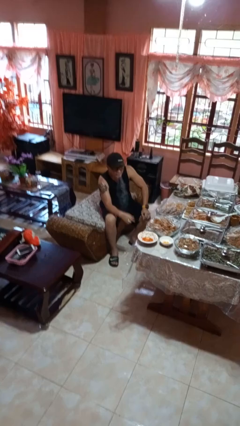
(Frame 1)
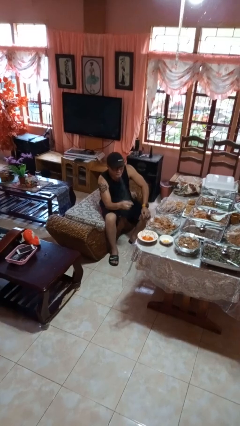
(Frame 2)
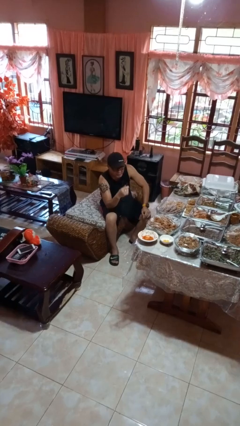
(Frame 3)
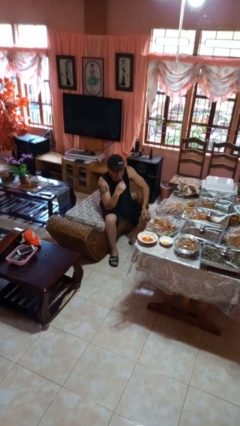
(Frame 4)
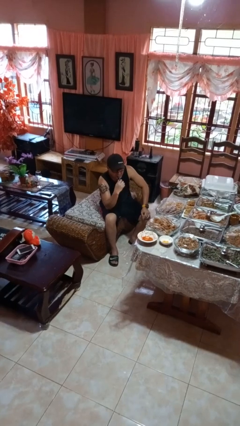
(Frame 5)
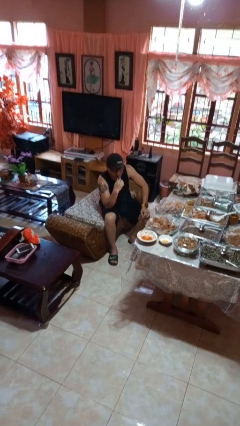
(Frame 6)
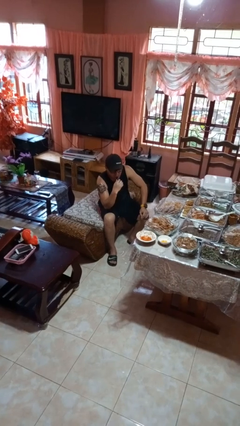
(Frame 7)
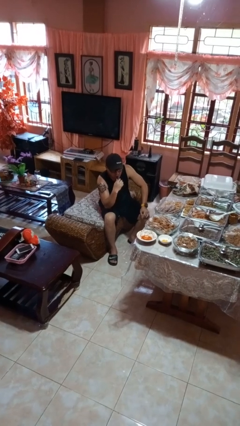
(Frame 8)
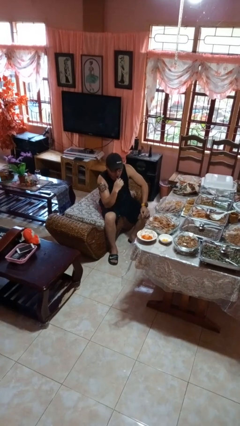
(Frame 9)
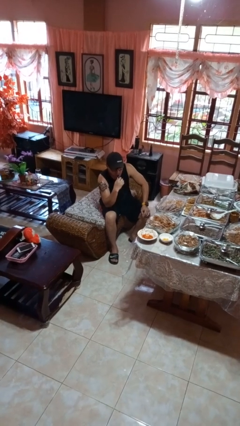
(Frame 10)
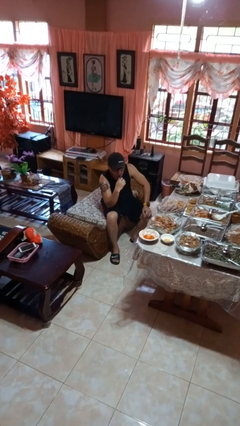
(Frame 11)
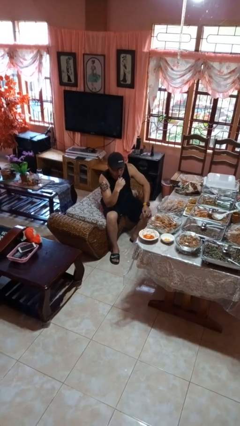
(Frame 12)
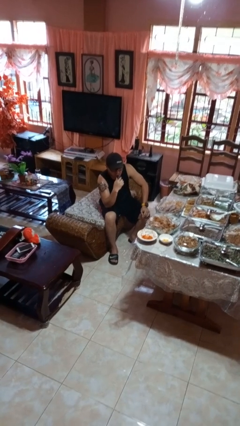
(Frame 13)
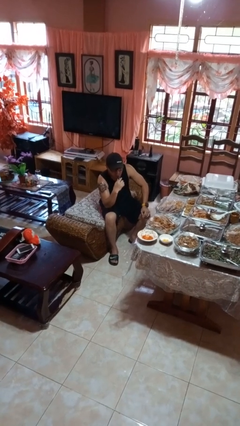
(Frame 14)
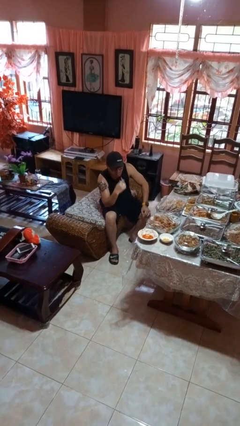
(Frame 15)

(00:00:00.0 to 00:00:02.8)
person vapes

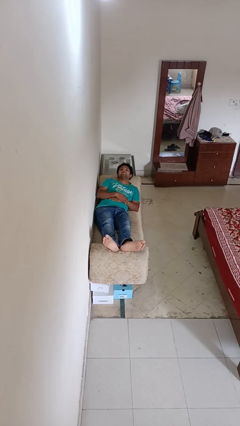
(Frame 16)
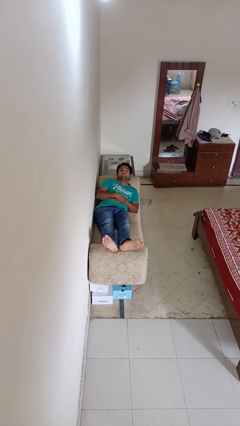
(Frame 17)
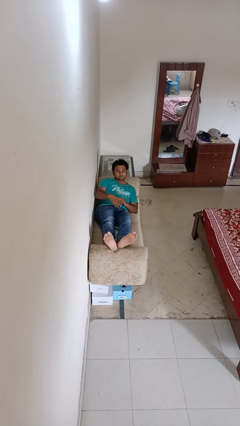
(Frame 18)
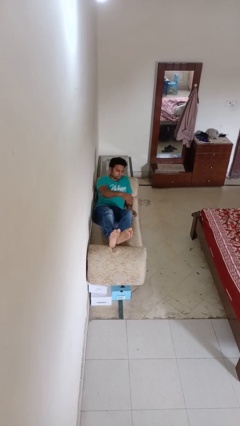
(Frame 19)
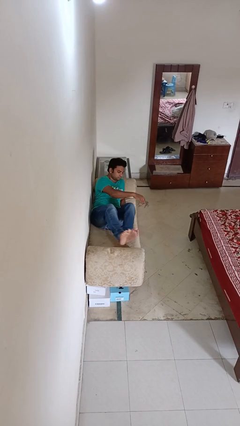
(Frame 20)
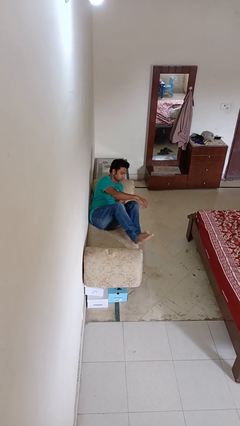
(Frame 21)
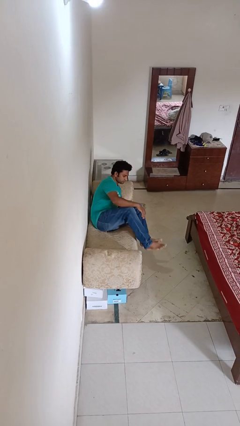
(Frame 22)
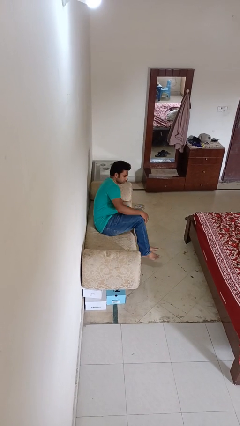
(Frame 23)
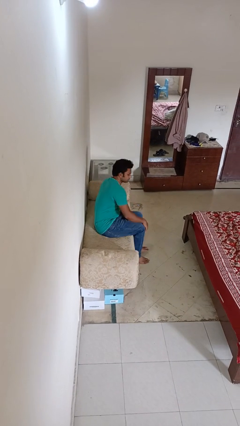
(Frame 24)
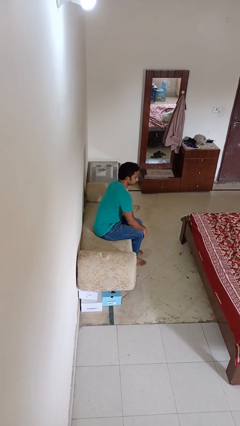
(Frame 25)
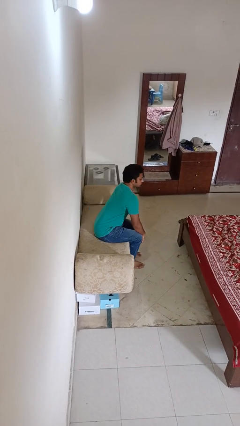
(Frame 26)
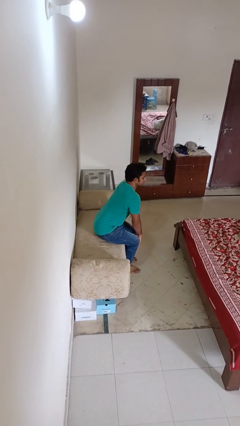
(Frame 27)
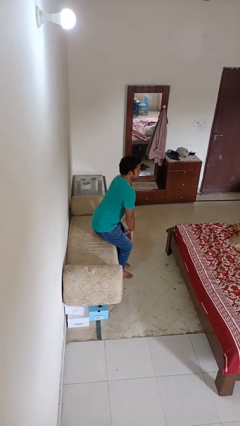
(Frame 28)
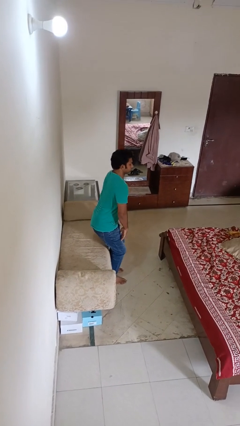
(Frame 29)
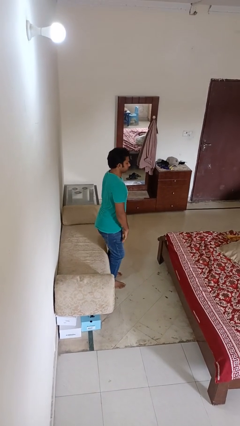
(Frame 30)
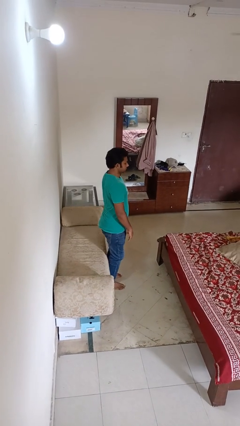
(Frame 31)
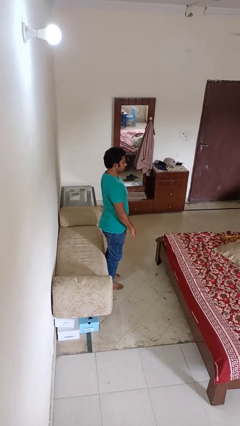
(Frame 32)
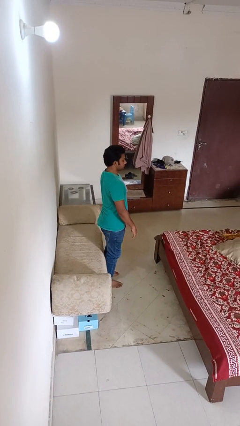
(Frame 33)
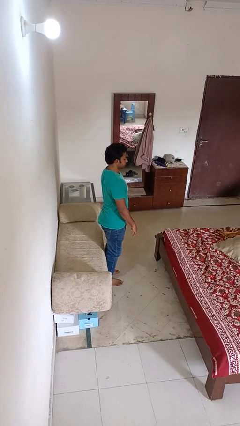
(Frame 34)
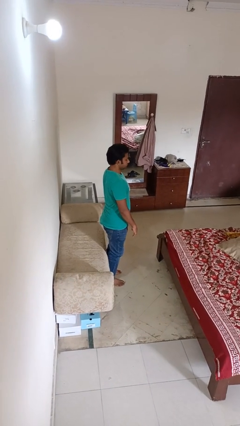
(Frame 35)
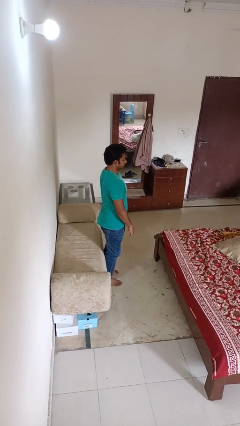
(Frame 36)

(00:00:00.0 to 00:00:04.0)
person stands up

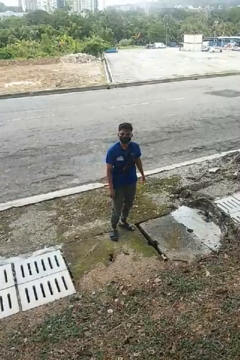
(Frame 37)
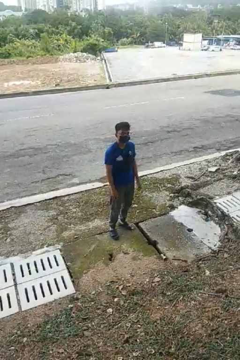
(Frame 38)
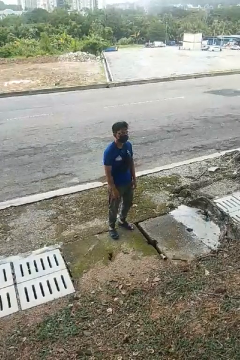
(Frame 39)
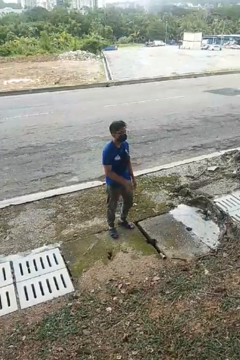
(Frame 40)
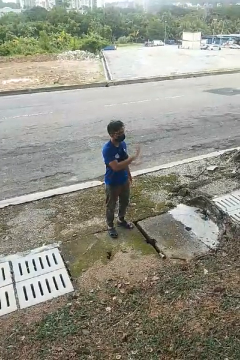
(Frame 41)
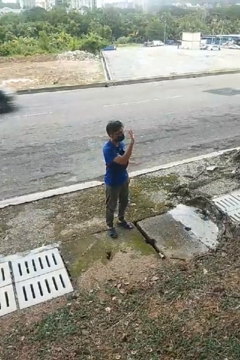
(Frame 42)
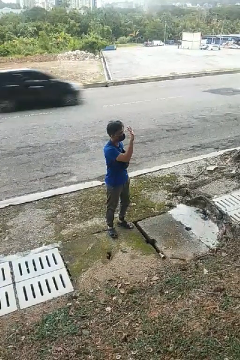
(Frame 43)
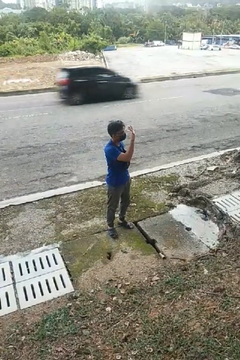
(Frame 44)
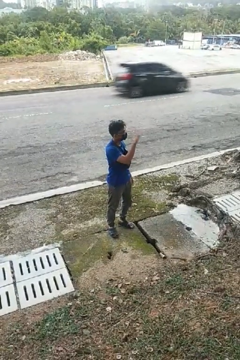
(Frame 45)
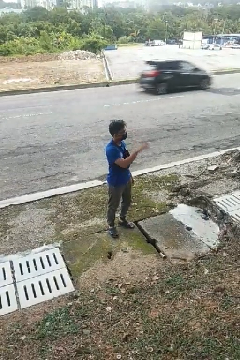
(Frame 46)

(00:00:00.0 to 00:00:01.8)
person gestures number five

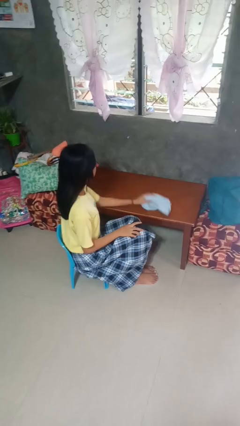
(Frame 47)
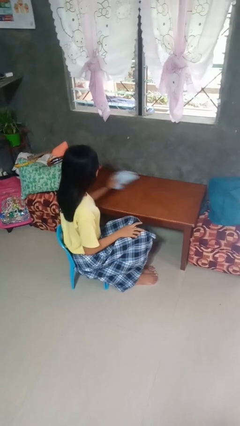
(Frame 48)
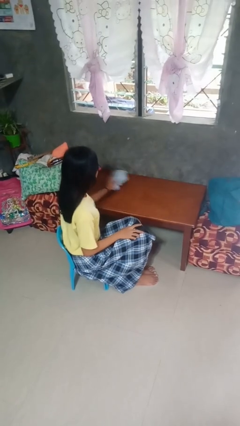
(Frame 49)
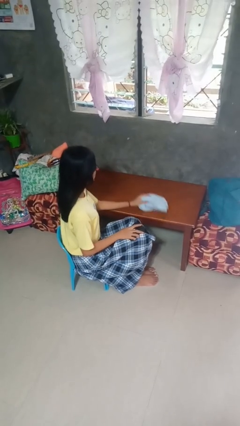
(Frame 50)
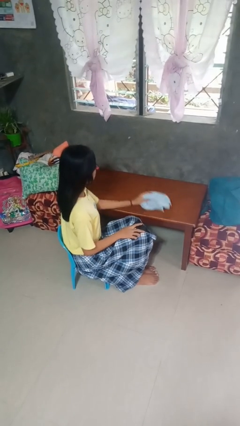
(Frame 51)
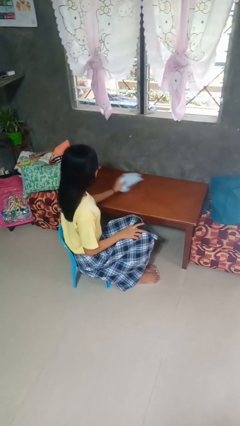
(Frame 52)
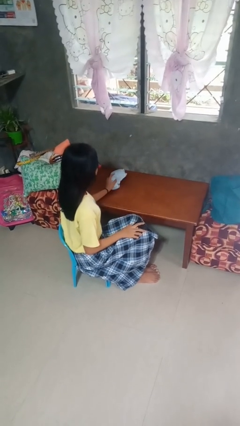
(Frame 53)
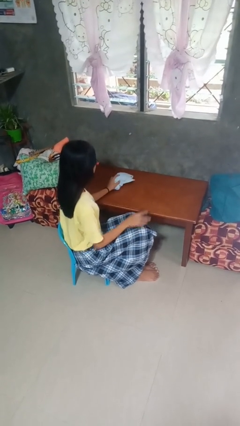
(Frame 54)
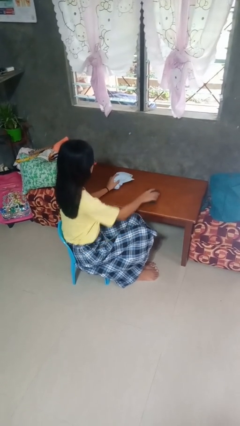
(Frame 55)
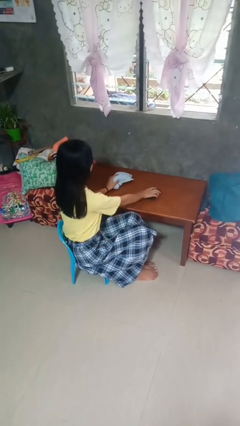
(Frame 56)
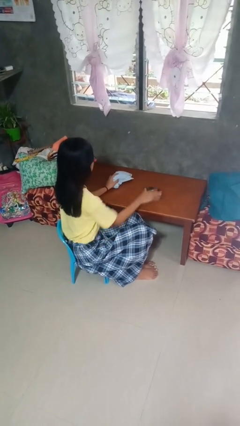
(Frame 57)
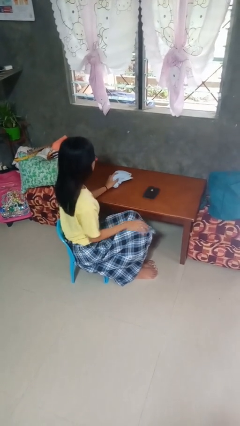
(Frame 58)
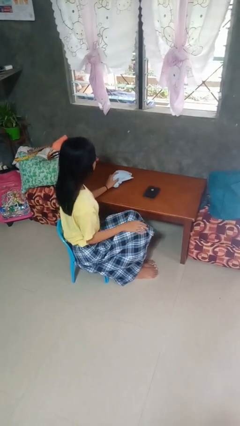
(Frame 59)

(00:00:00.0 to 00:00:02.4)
person cleans table with rag

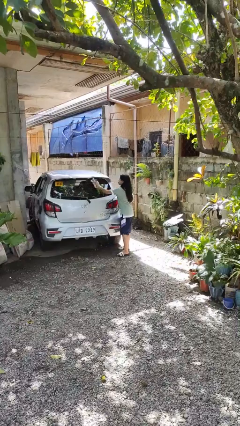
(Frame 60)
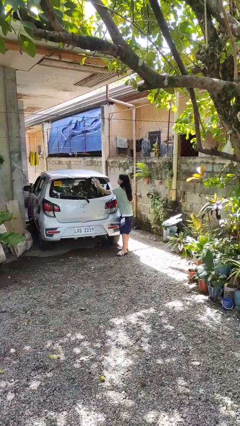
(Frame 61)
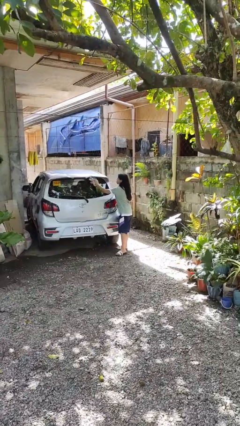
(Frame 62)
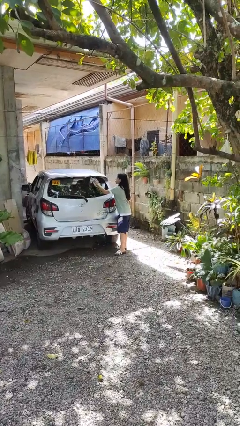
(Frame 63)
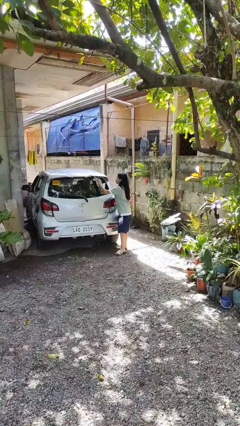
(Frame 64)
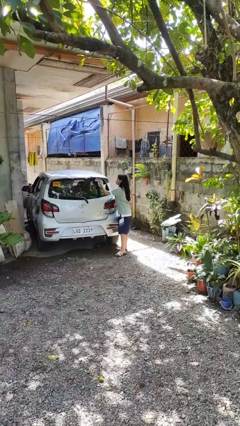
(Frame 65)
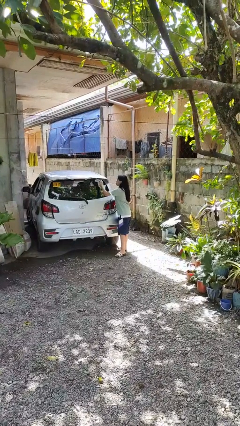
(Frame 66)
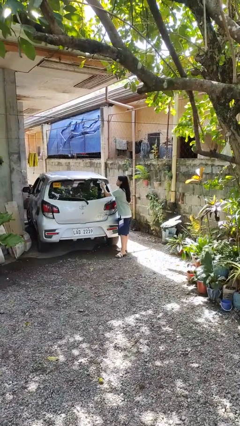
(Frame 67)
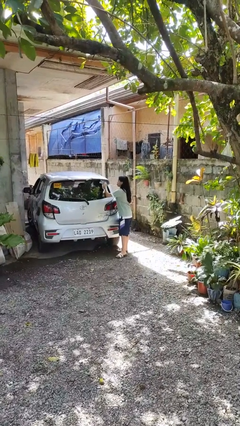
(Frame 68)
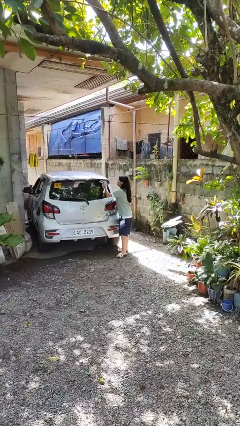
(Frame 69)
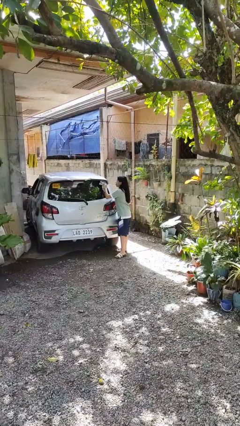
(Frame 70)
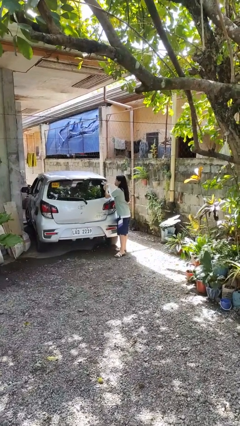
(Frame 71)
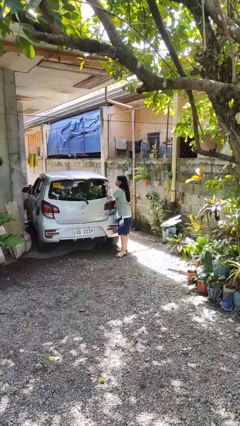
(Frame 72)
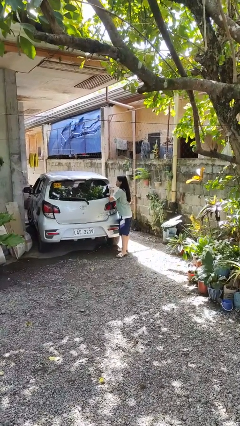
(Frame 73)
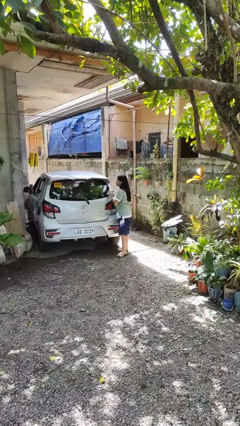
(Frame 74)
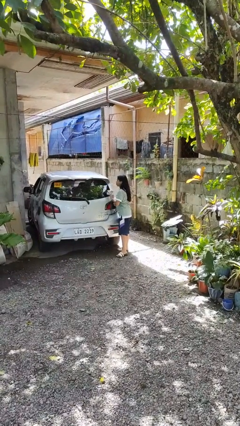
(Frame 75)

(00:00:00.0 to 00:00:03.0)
person polishes car with rag

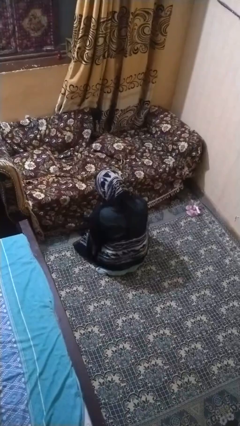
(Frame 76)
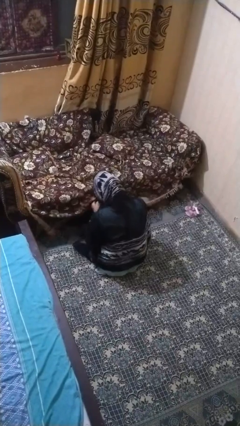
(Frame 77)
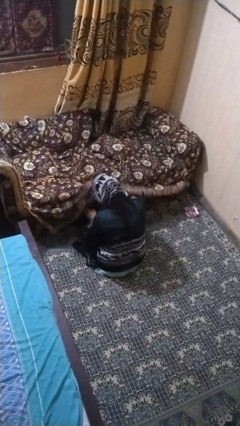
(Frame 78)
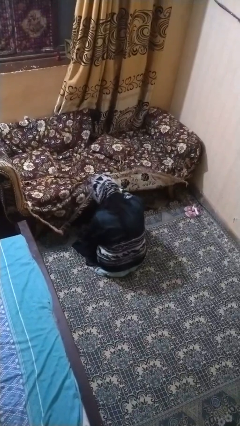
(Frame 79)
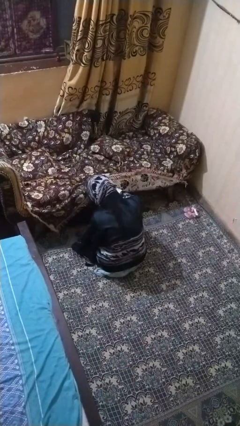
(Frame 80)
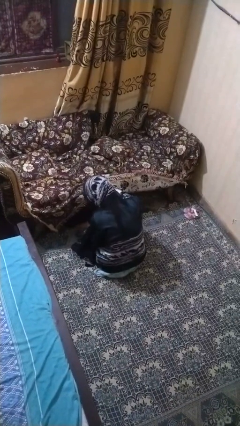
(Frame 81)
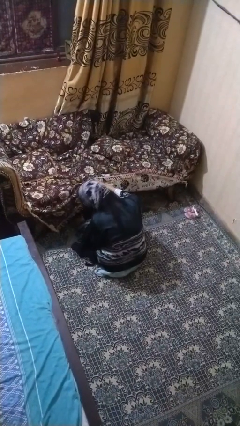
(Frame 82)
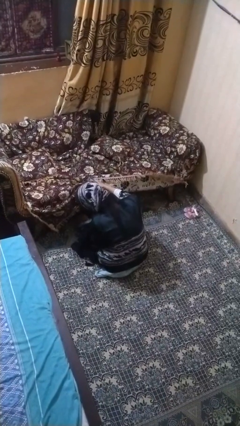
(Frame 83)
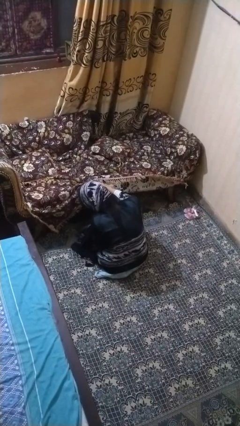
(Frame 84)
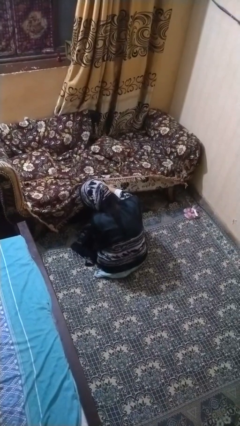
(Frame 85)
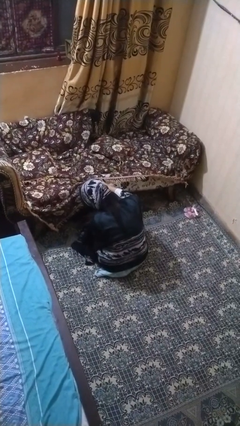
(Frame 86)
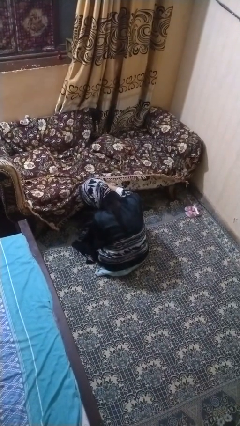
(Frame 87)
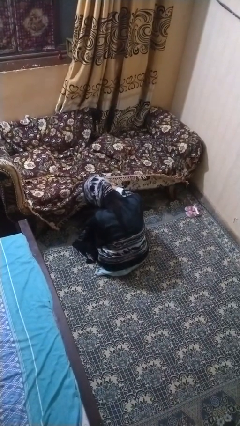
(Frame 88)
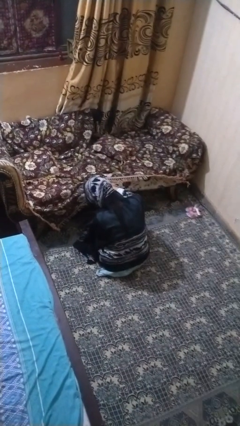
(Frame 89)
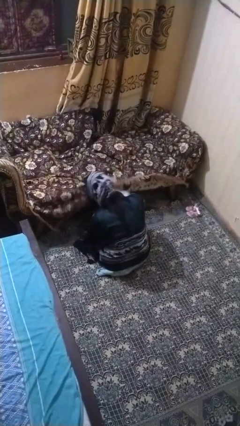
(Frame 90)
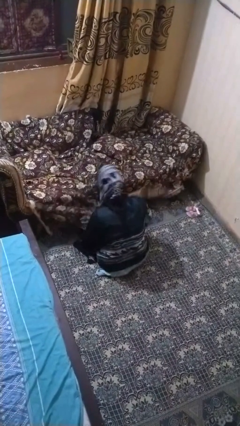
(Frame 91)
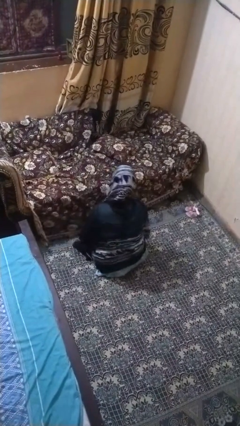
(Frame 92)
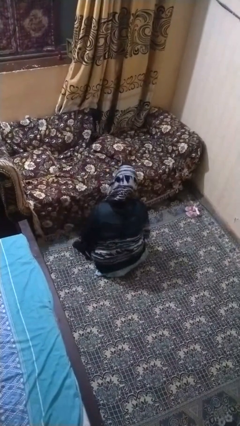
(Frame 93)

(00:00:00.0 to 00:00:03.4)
person searches under couch

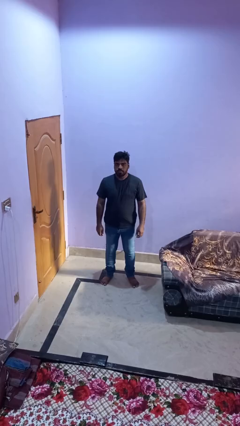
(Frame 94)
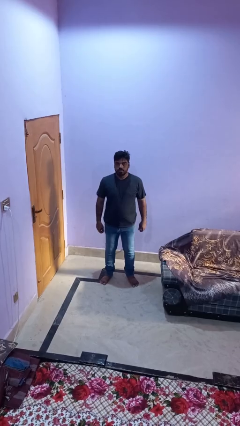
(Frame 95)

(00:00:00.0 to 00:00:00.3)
person tucks in shirt
